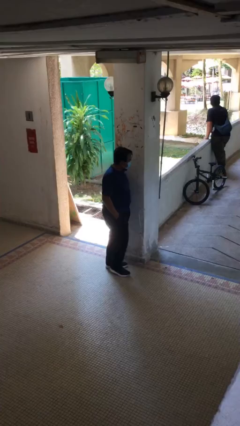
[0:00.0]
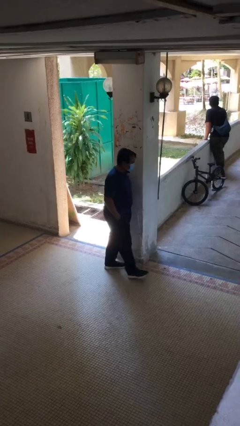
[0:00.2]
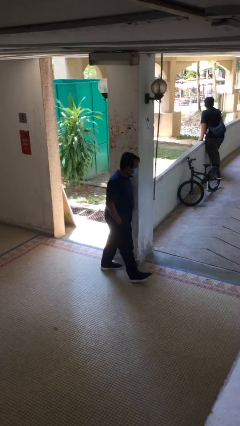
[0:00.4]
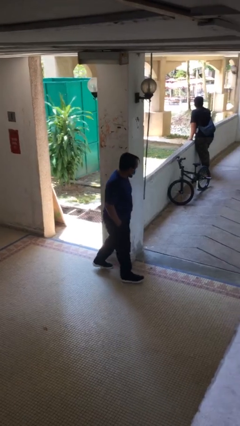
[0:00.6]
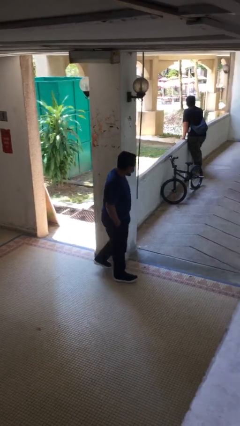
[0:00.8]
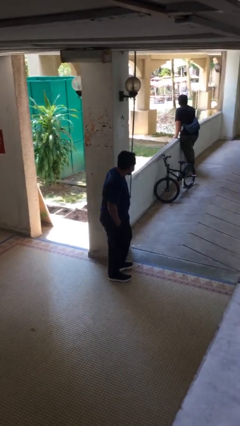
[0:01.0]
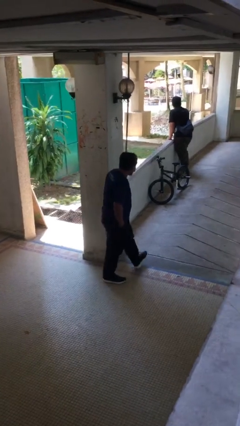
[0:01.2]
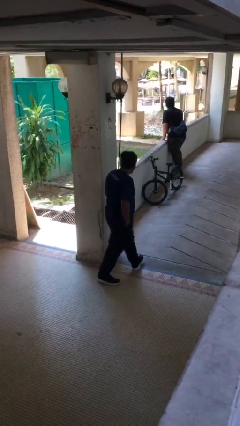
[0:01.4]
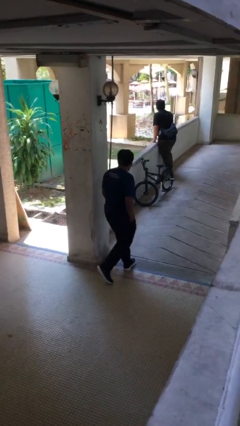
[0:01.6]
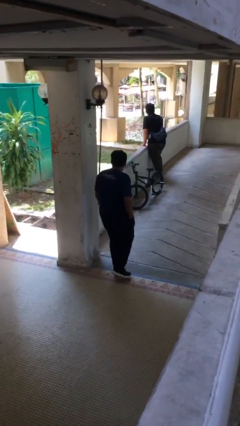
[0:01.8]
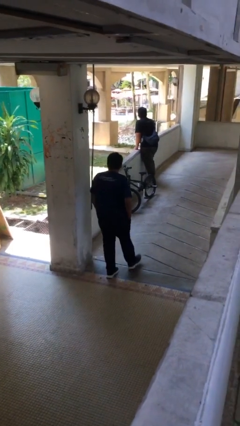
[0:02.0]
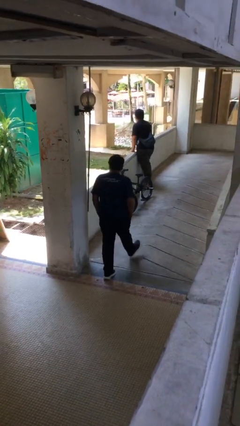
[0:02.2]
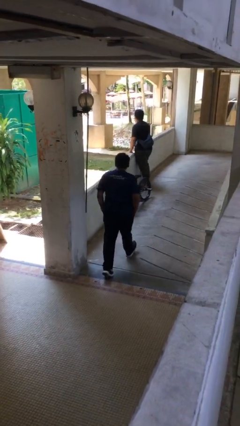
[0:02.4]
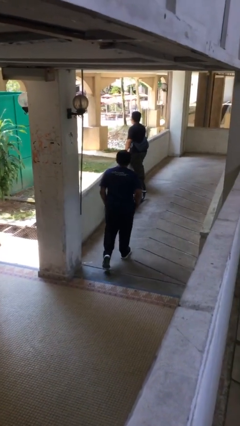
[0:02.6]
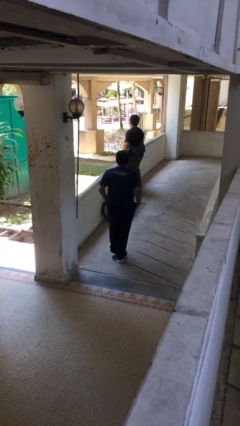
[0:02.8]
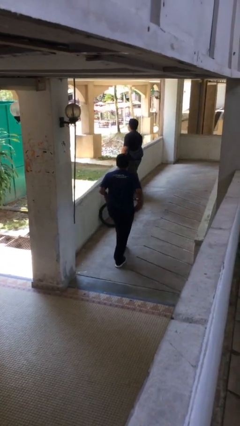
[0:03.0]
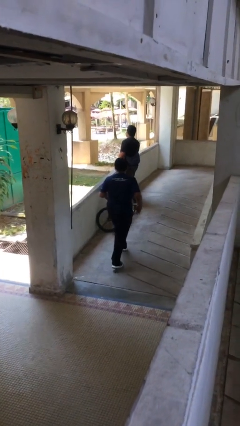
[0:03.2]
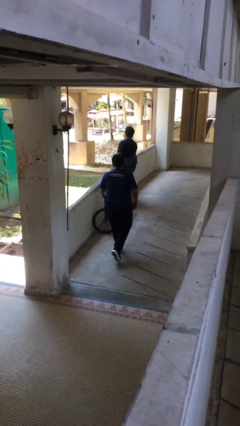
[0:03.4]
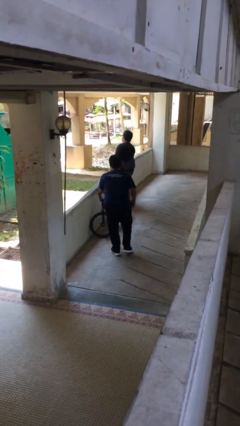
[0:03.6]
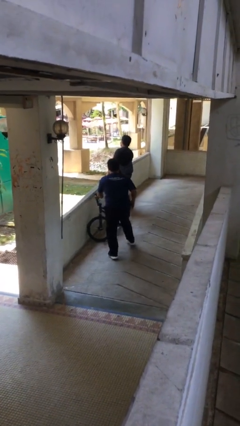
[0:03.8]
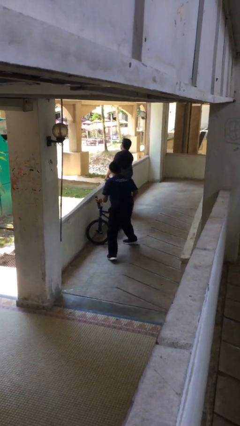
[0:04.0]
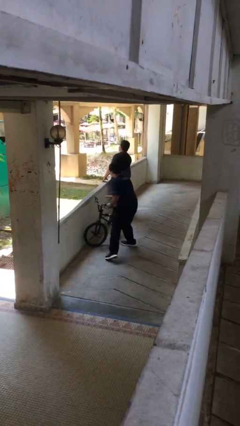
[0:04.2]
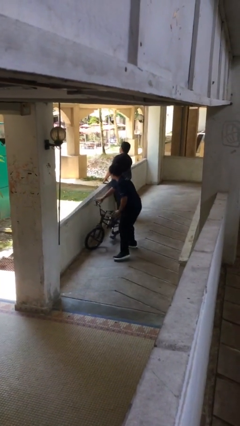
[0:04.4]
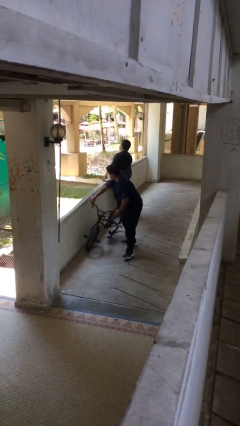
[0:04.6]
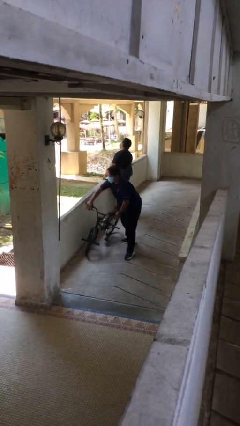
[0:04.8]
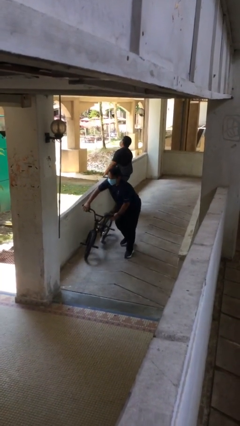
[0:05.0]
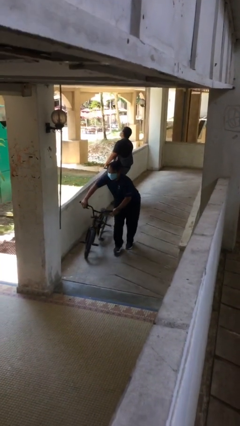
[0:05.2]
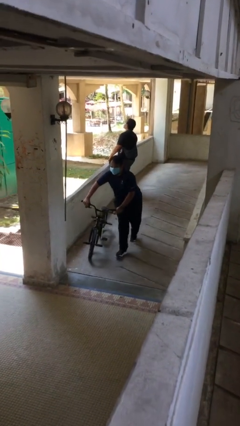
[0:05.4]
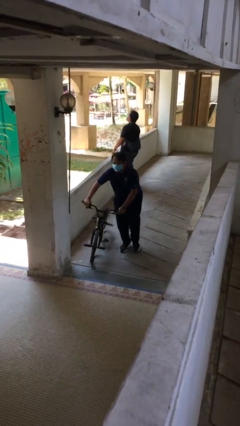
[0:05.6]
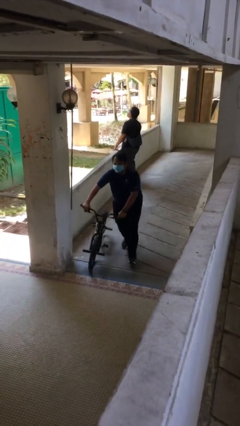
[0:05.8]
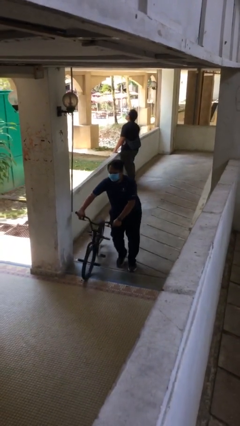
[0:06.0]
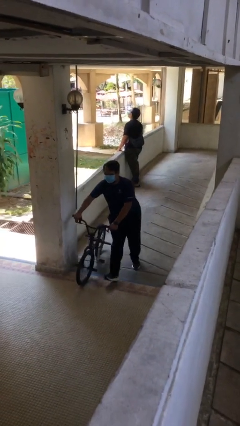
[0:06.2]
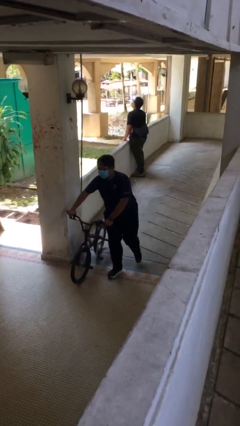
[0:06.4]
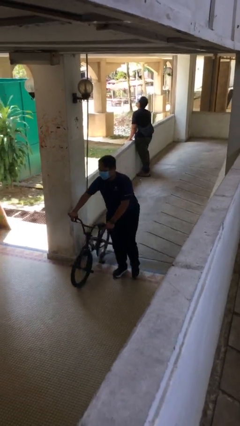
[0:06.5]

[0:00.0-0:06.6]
person steals object from person

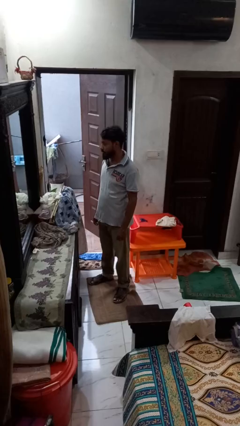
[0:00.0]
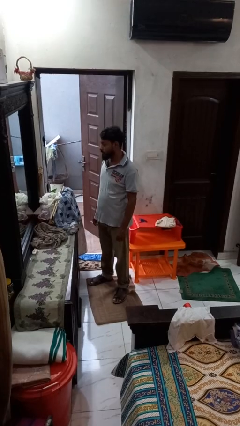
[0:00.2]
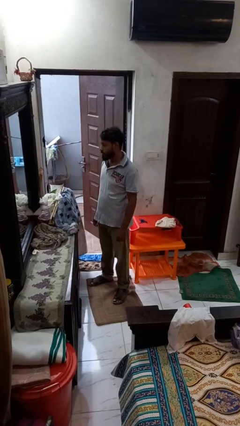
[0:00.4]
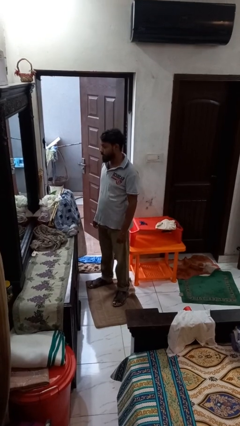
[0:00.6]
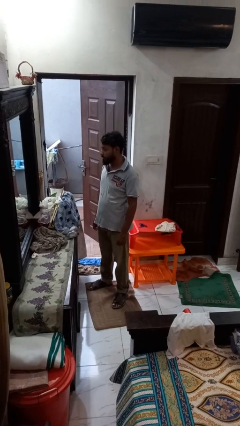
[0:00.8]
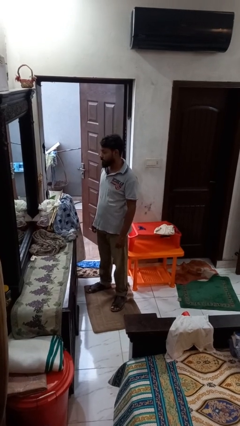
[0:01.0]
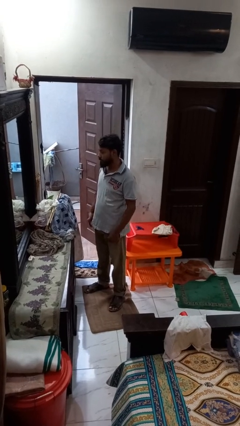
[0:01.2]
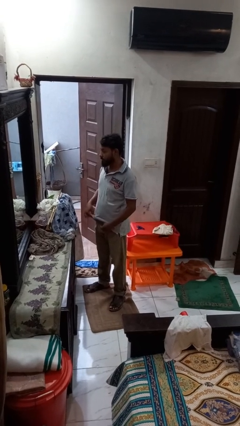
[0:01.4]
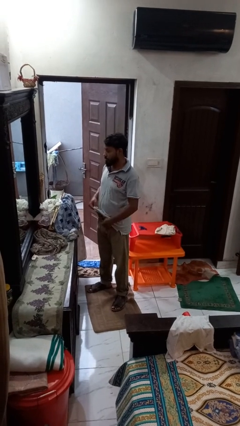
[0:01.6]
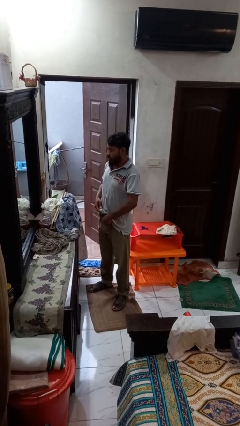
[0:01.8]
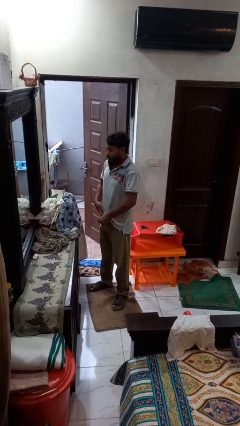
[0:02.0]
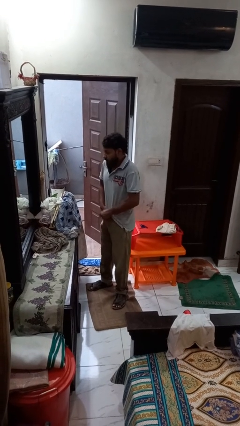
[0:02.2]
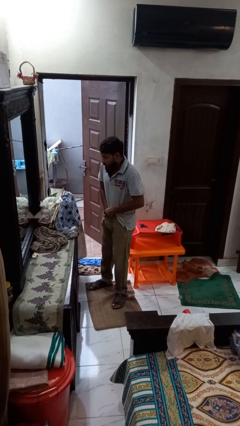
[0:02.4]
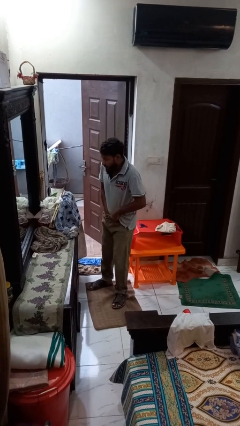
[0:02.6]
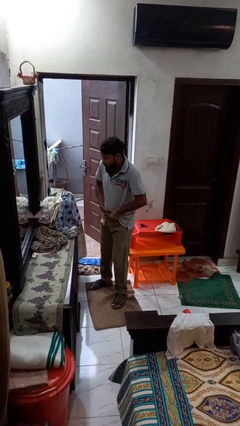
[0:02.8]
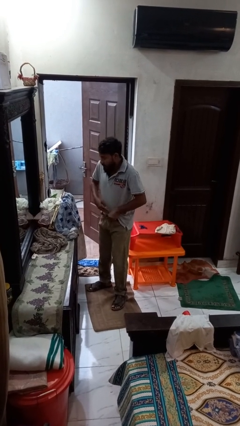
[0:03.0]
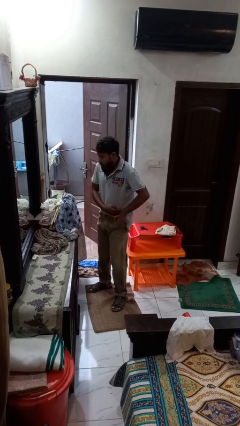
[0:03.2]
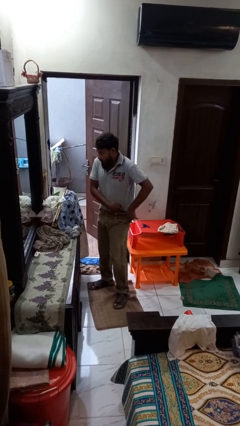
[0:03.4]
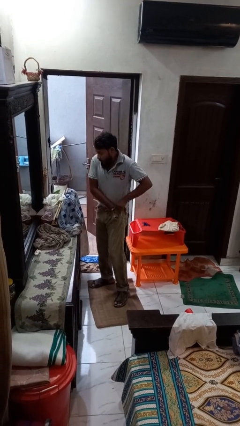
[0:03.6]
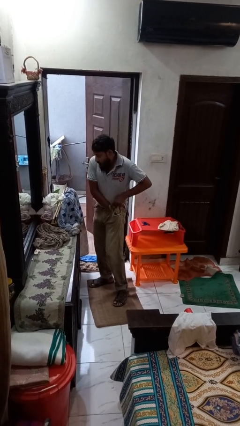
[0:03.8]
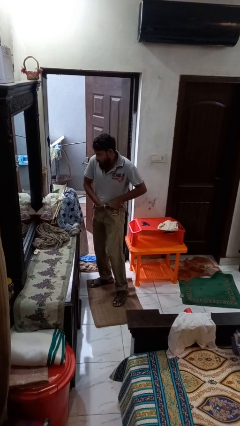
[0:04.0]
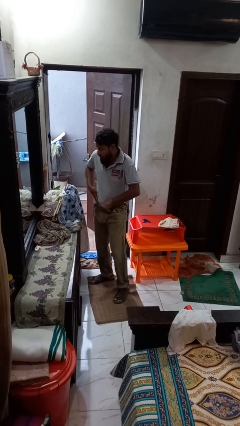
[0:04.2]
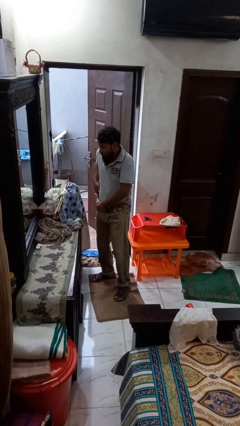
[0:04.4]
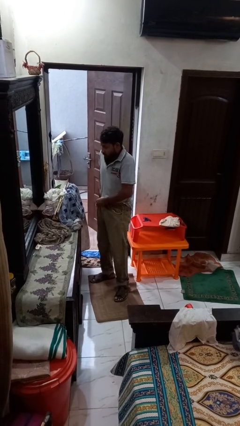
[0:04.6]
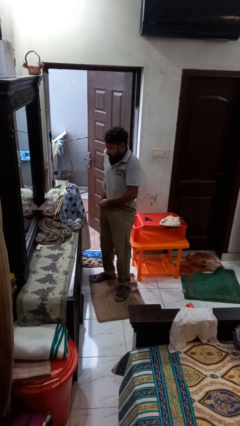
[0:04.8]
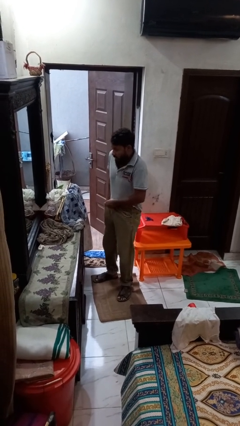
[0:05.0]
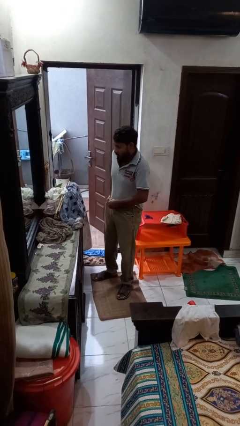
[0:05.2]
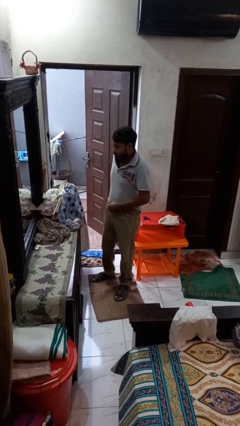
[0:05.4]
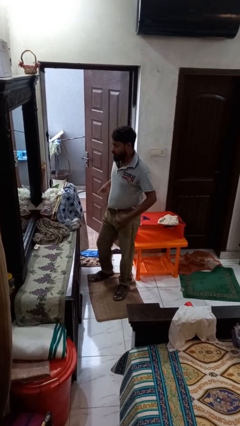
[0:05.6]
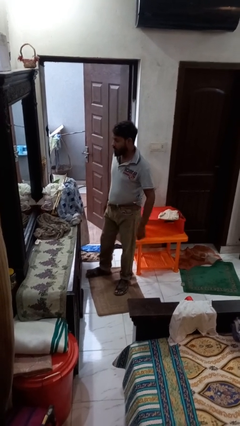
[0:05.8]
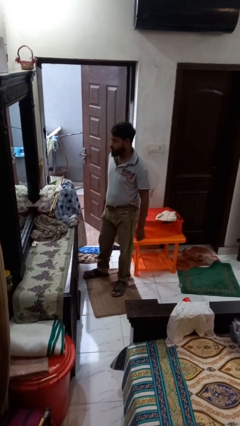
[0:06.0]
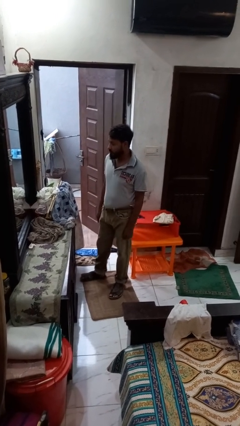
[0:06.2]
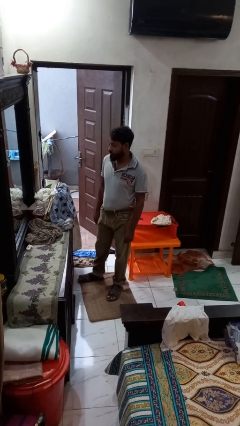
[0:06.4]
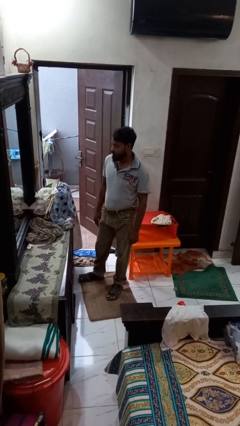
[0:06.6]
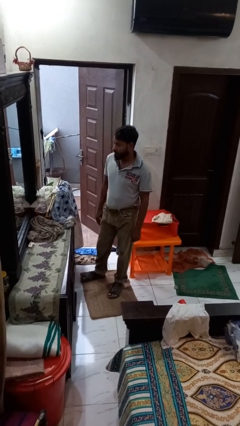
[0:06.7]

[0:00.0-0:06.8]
person tucks in shirt

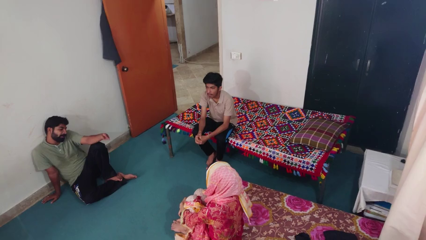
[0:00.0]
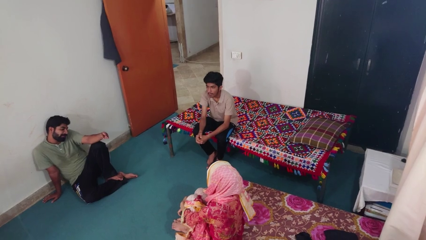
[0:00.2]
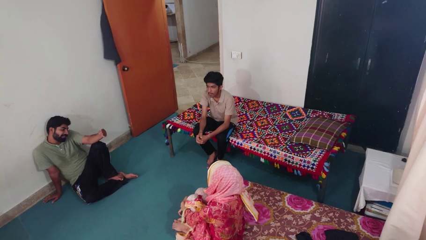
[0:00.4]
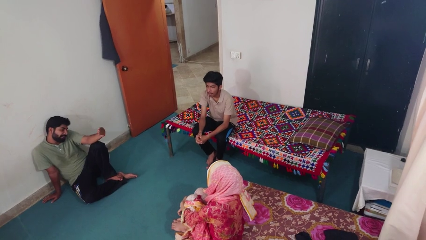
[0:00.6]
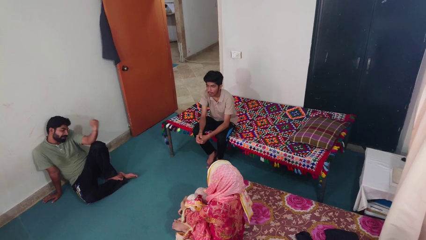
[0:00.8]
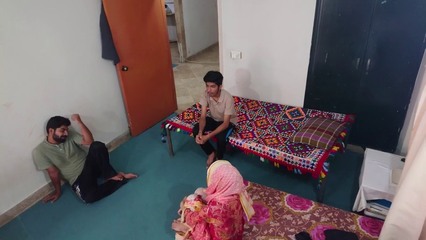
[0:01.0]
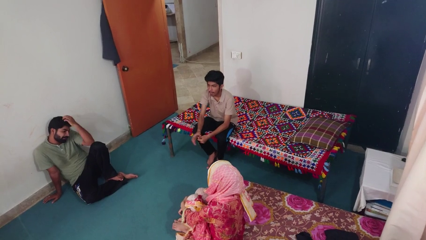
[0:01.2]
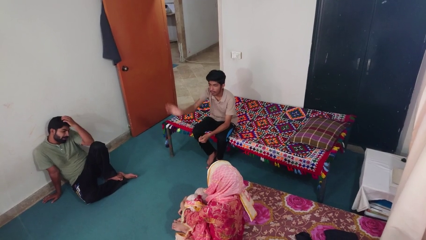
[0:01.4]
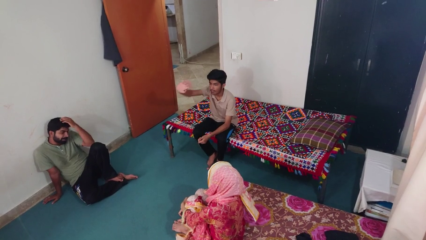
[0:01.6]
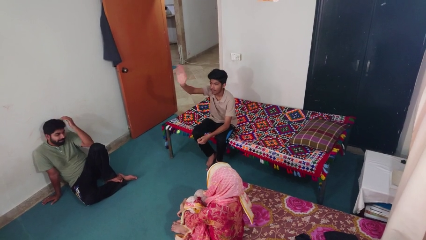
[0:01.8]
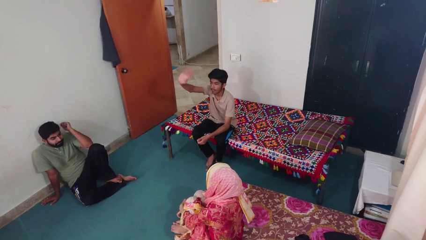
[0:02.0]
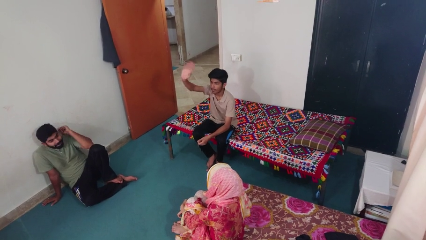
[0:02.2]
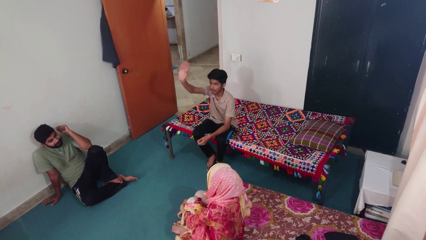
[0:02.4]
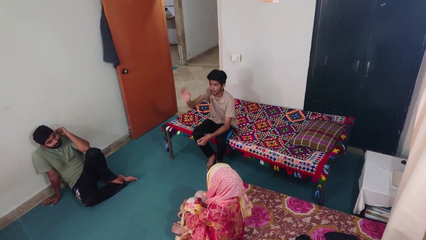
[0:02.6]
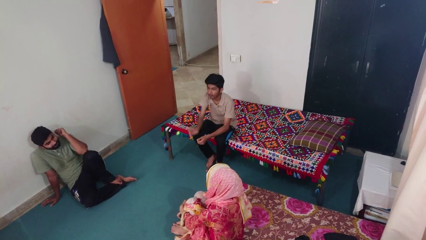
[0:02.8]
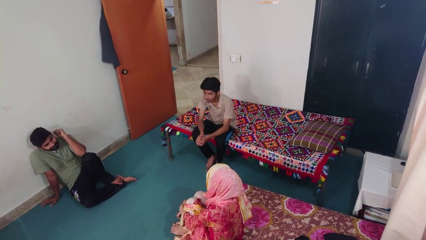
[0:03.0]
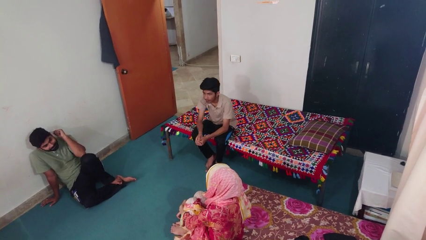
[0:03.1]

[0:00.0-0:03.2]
person waves at person

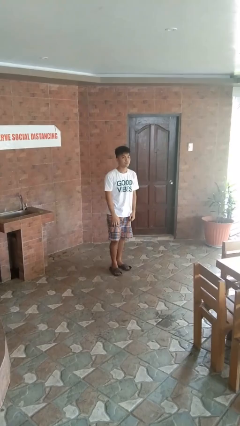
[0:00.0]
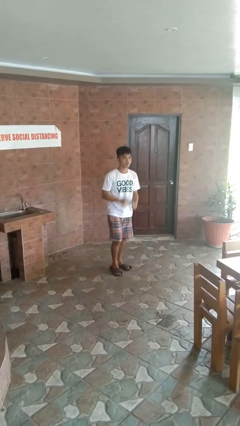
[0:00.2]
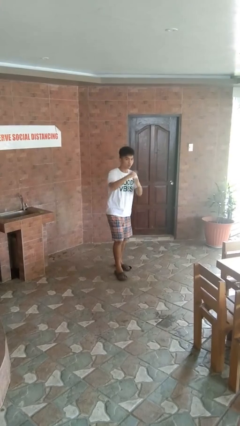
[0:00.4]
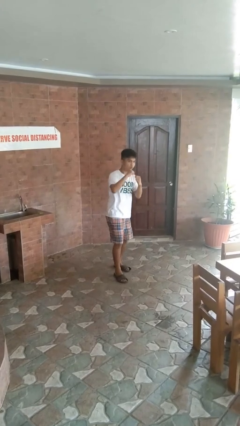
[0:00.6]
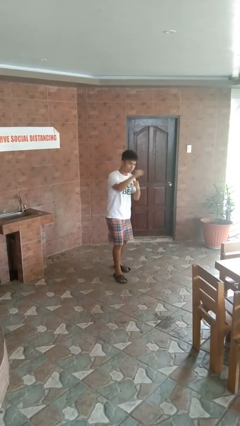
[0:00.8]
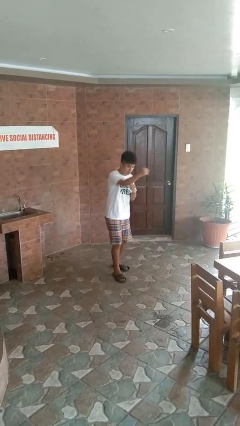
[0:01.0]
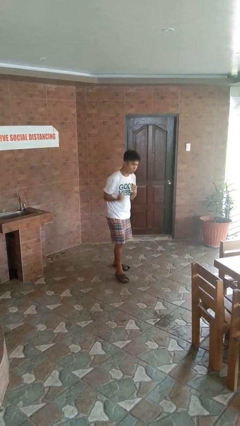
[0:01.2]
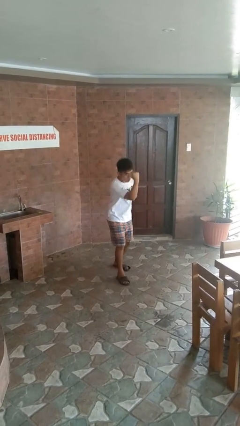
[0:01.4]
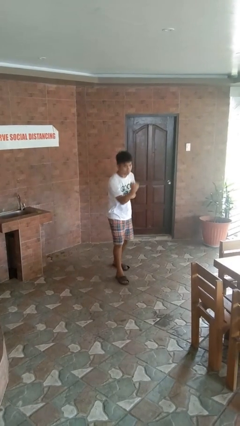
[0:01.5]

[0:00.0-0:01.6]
person punches
